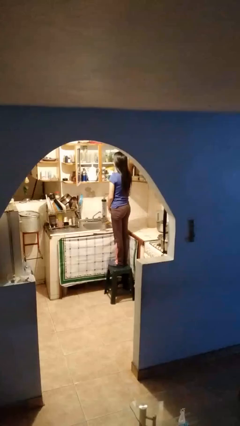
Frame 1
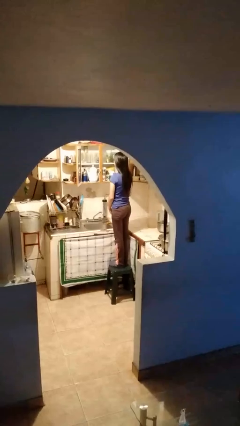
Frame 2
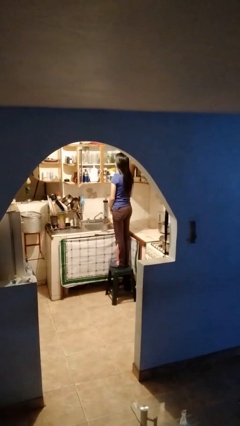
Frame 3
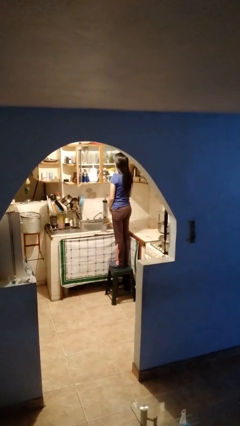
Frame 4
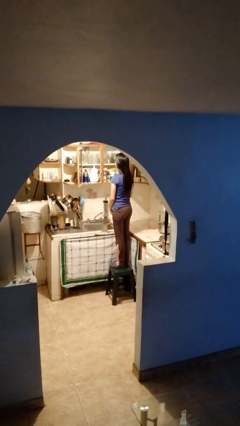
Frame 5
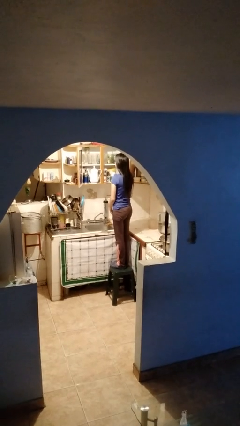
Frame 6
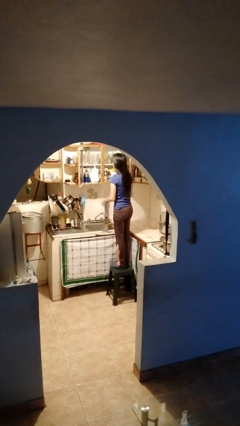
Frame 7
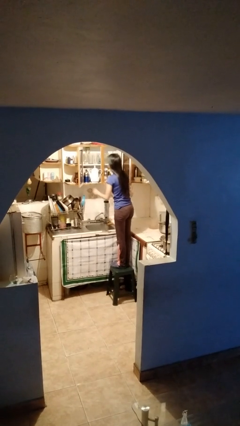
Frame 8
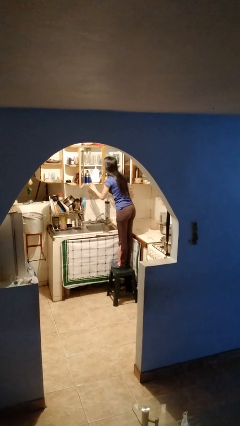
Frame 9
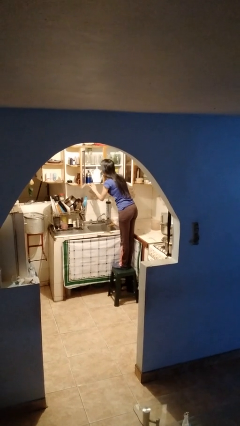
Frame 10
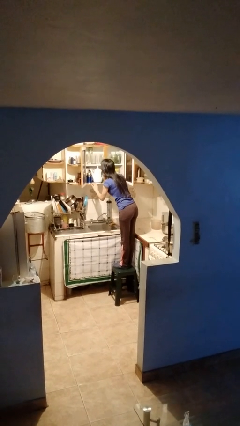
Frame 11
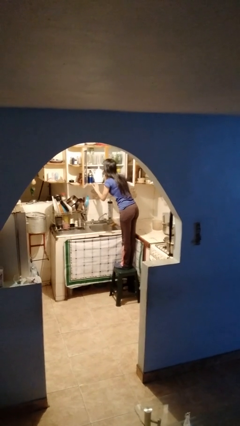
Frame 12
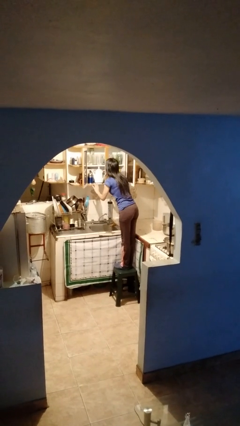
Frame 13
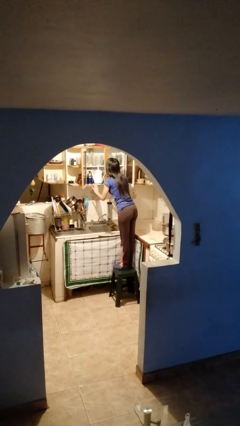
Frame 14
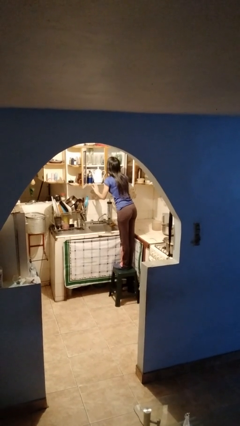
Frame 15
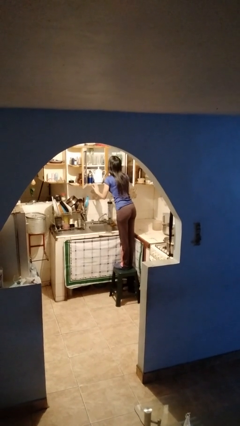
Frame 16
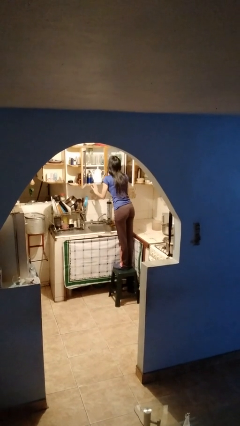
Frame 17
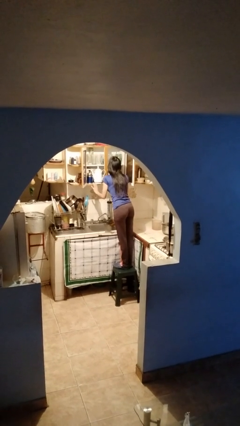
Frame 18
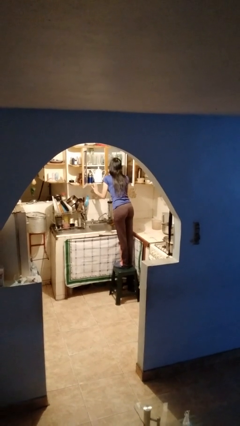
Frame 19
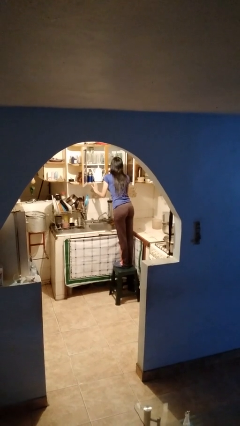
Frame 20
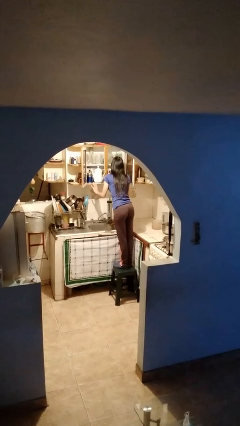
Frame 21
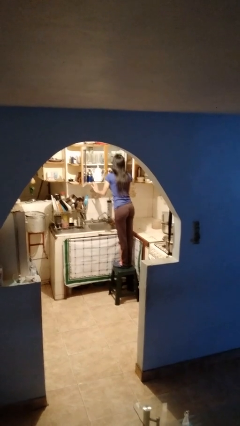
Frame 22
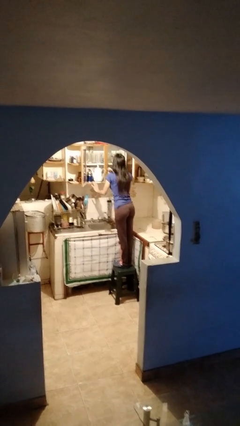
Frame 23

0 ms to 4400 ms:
person searches in cabinet

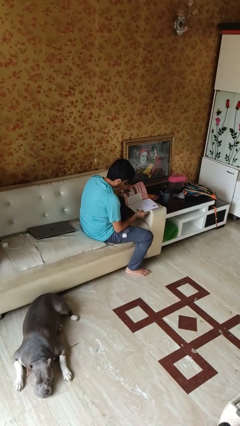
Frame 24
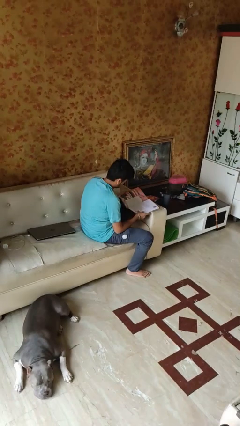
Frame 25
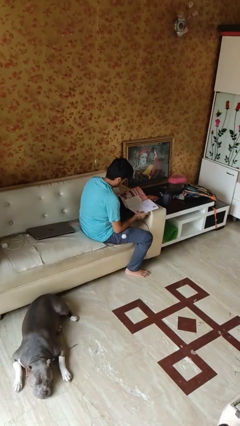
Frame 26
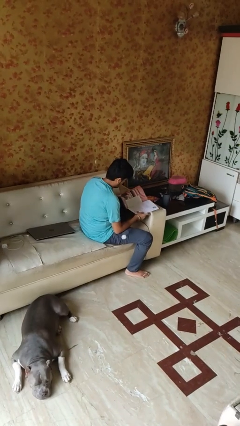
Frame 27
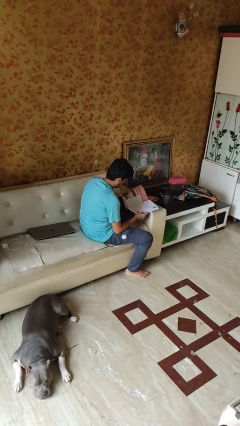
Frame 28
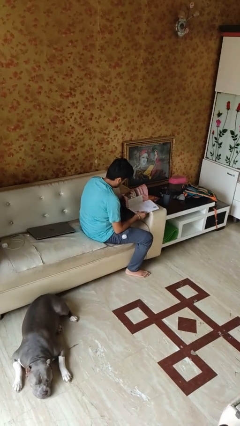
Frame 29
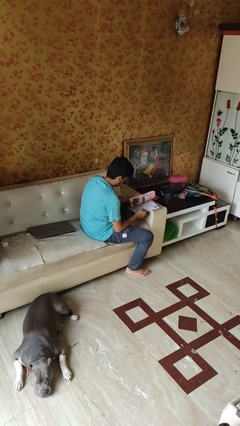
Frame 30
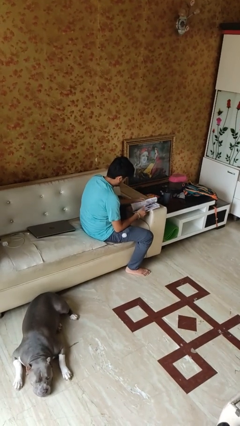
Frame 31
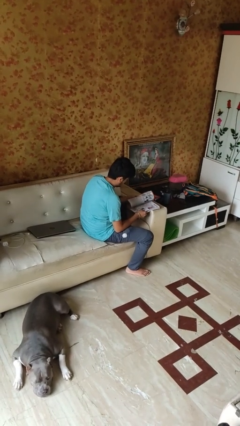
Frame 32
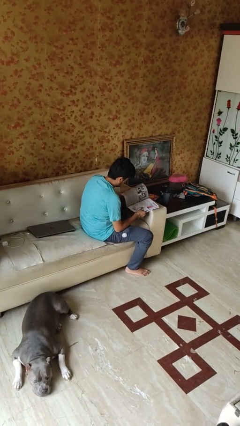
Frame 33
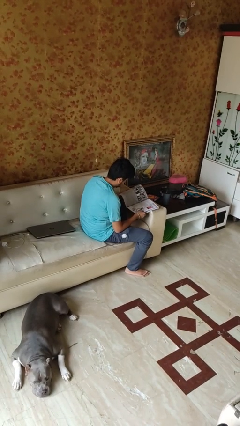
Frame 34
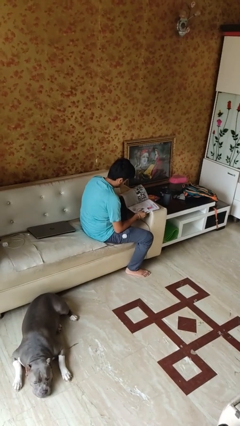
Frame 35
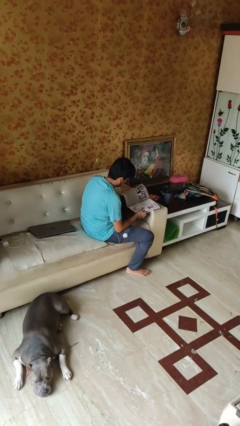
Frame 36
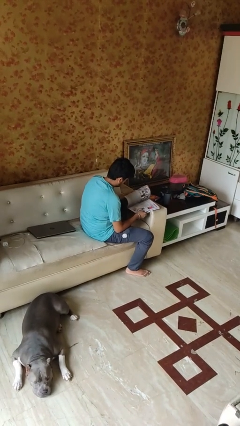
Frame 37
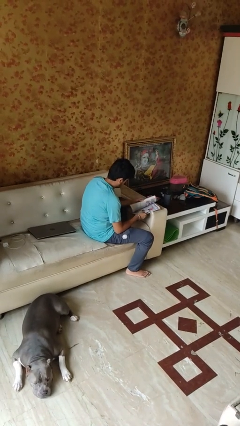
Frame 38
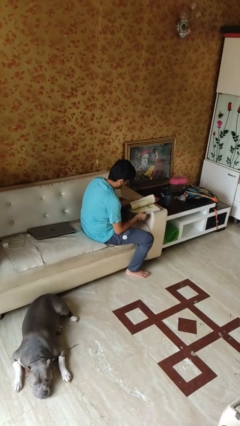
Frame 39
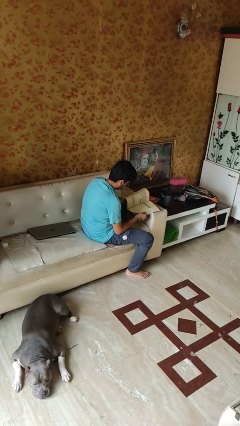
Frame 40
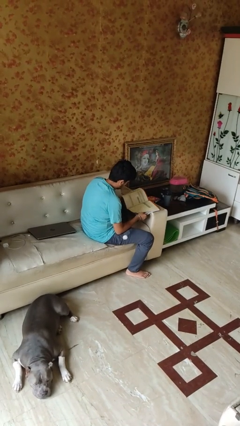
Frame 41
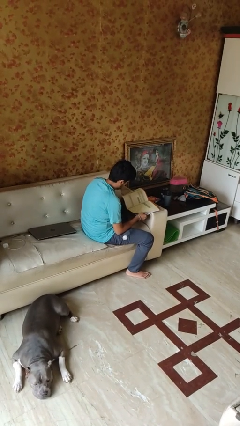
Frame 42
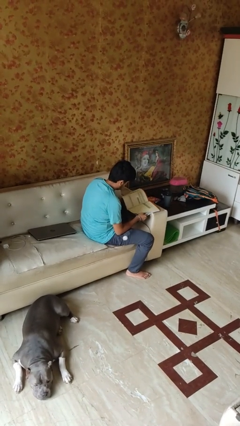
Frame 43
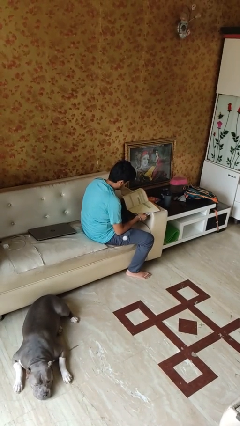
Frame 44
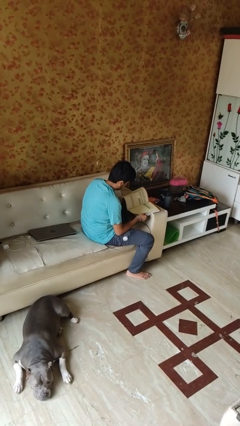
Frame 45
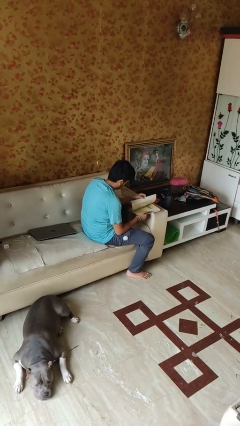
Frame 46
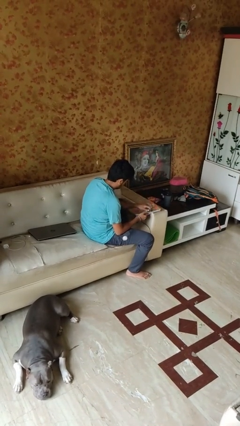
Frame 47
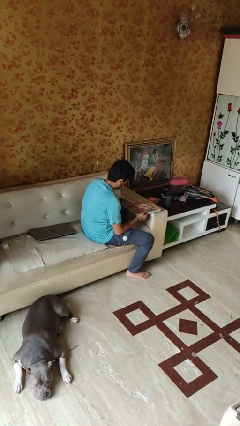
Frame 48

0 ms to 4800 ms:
person reads magazine

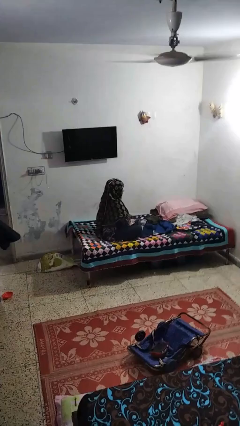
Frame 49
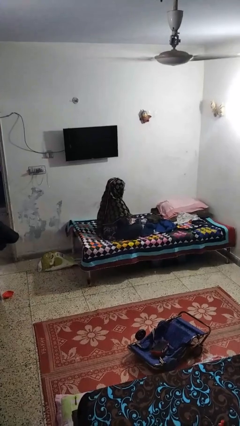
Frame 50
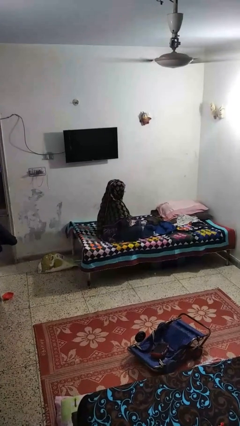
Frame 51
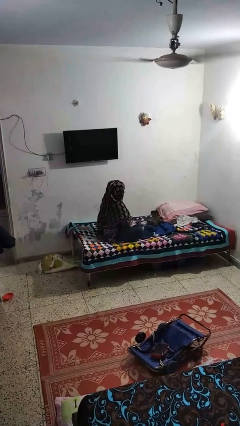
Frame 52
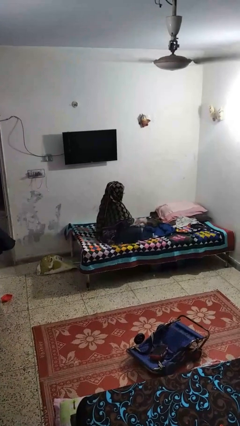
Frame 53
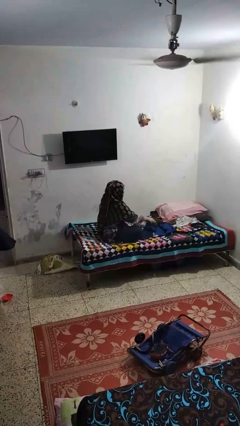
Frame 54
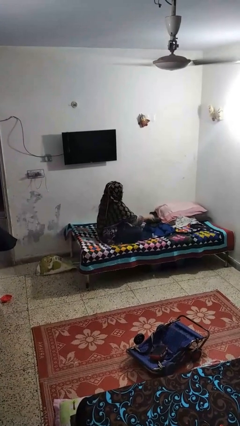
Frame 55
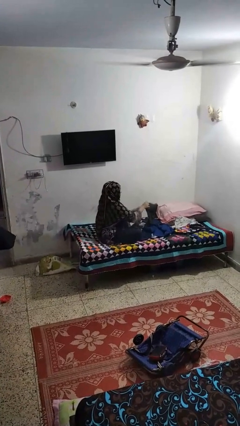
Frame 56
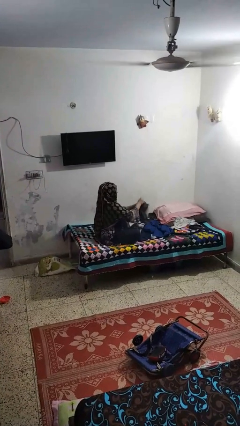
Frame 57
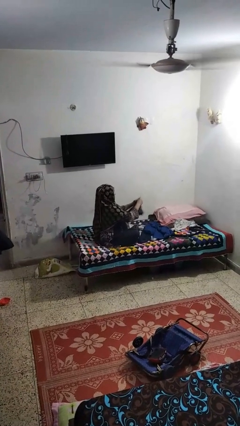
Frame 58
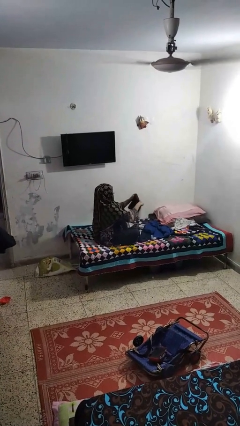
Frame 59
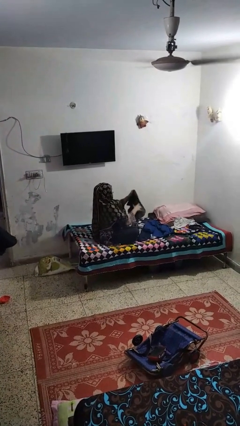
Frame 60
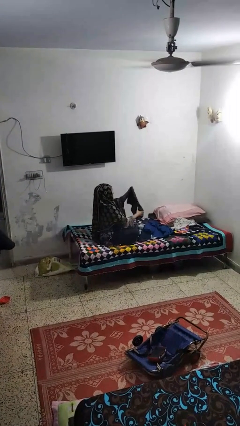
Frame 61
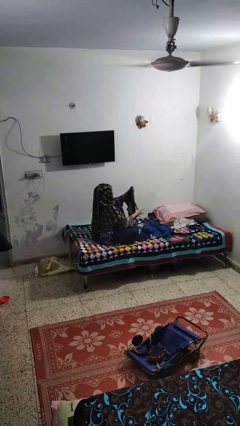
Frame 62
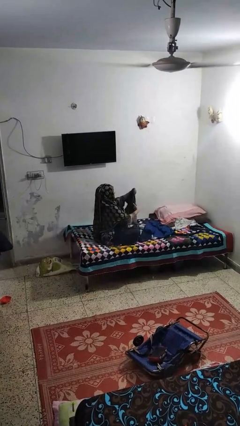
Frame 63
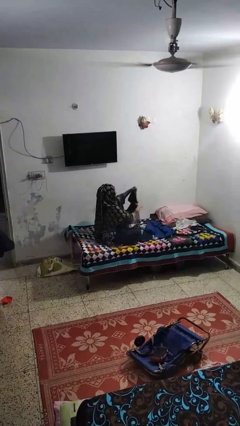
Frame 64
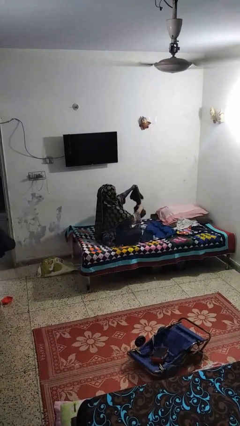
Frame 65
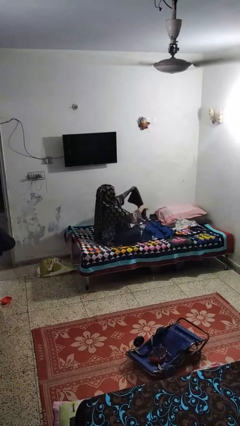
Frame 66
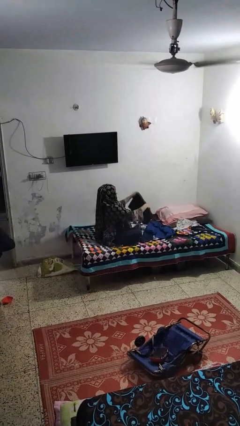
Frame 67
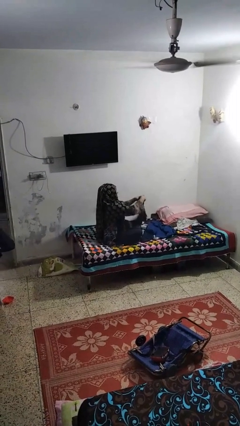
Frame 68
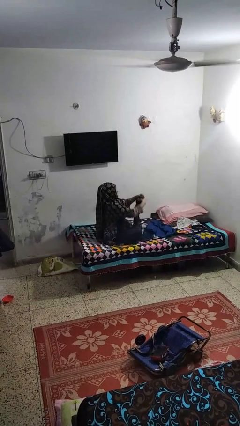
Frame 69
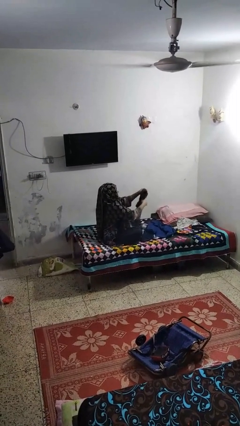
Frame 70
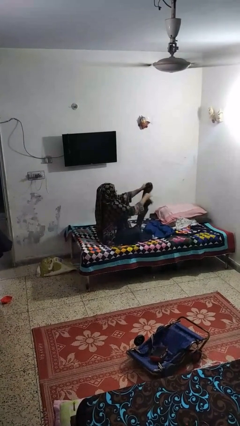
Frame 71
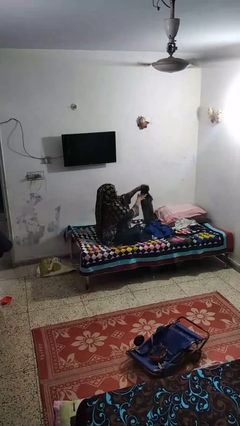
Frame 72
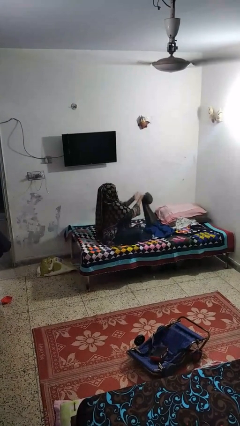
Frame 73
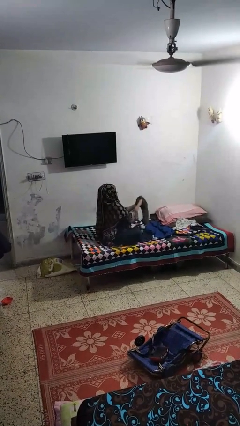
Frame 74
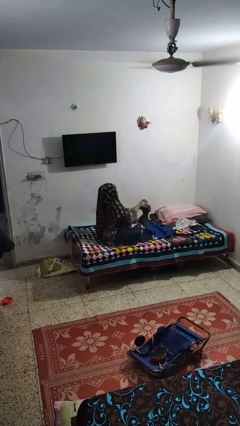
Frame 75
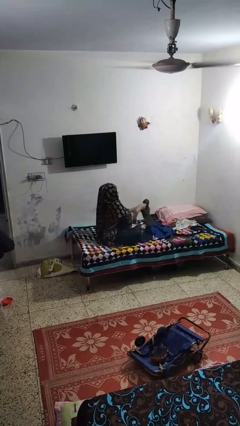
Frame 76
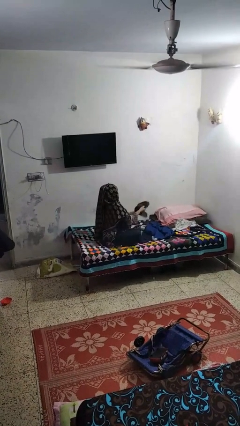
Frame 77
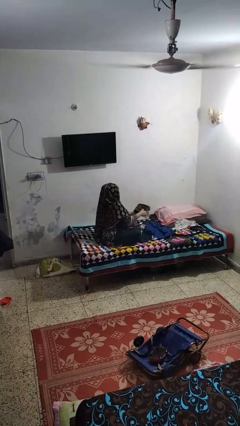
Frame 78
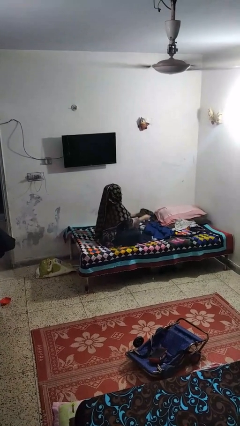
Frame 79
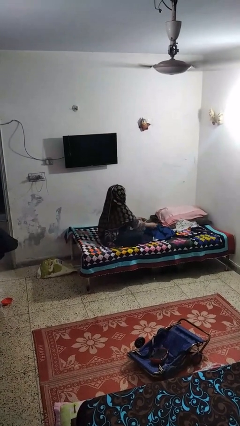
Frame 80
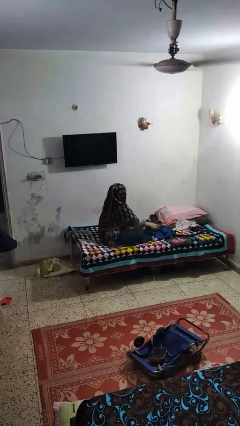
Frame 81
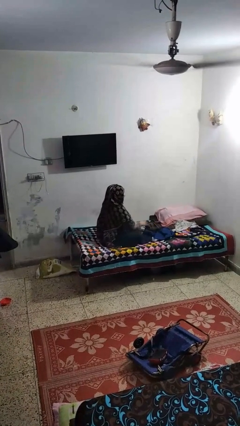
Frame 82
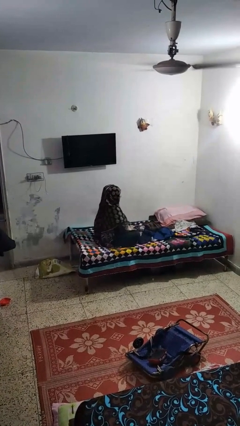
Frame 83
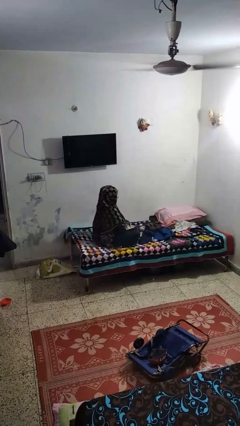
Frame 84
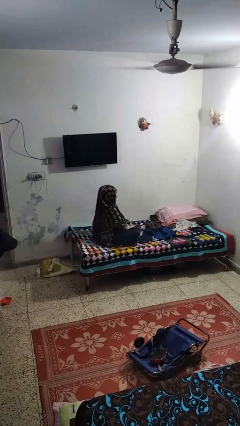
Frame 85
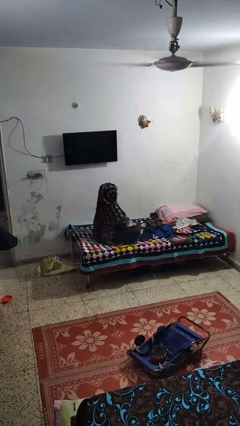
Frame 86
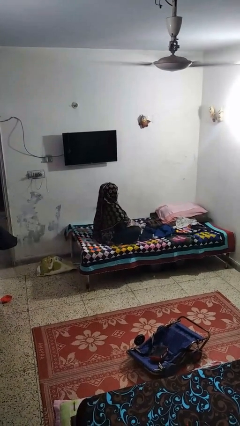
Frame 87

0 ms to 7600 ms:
person folds shirt

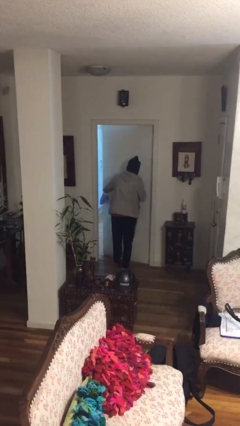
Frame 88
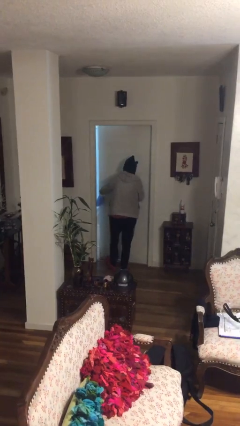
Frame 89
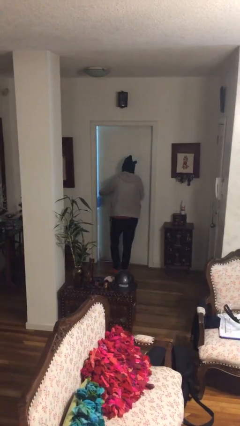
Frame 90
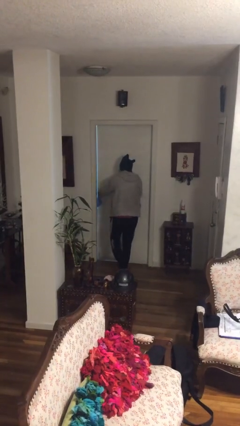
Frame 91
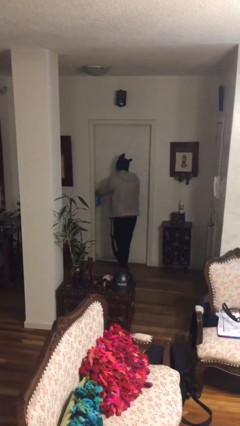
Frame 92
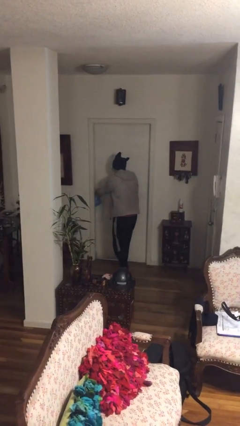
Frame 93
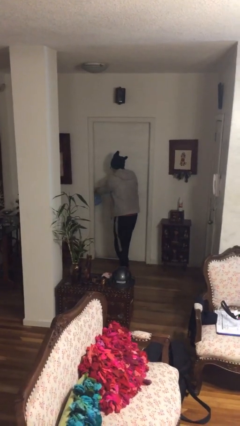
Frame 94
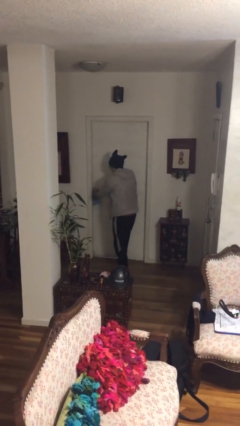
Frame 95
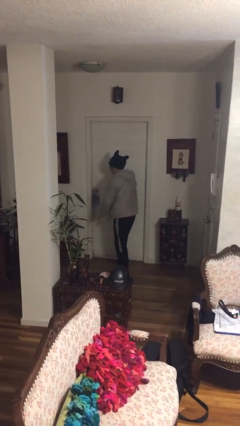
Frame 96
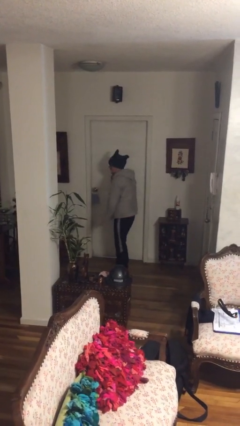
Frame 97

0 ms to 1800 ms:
person closes facility door
